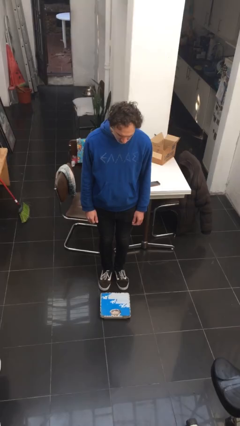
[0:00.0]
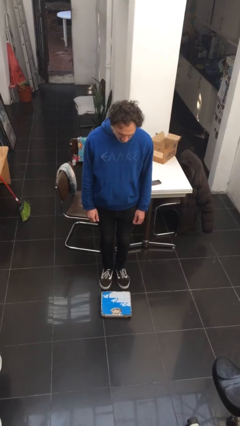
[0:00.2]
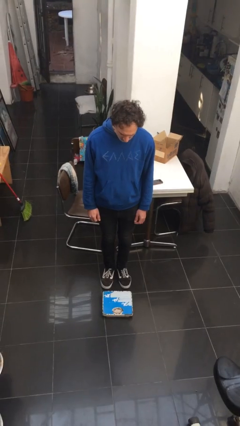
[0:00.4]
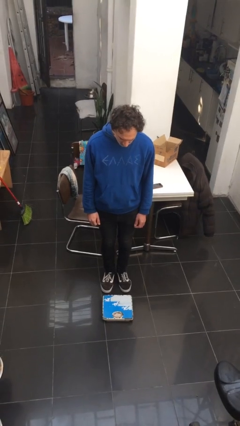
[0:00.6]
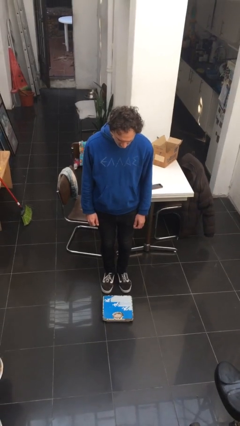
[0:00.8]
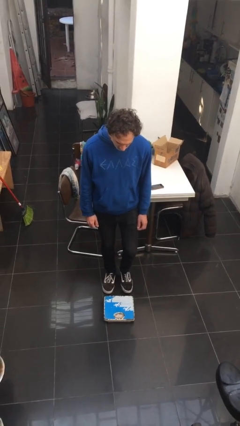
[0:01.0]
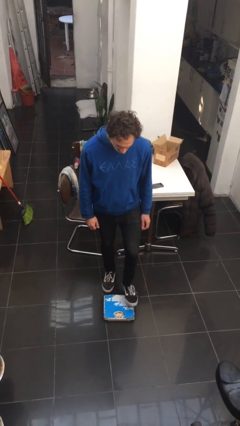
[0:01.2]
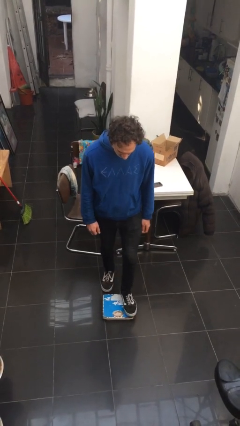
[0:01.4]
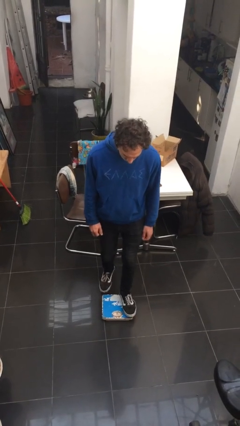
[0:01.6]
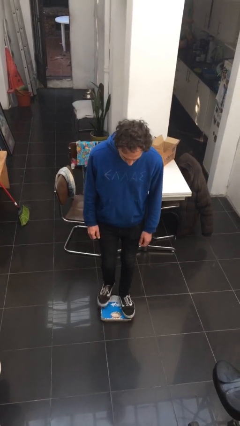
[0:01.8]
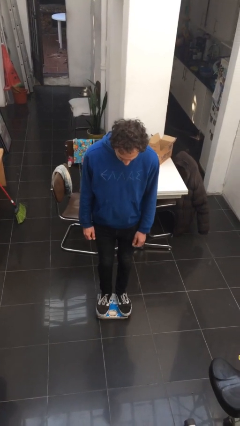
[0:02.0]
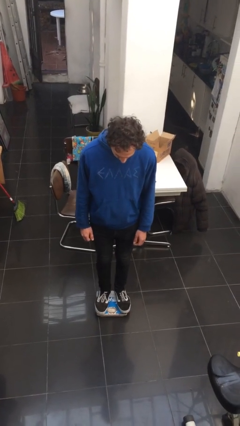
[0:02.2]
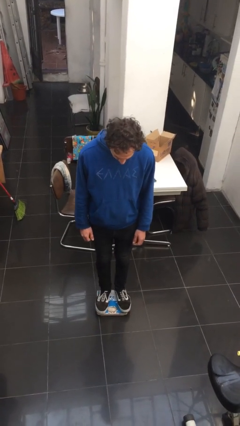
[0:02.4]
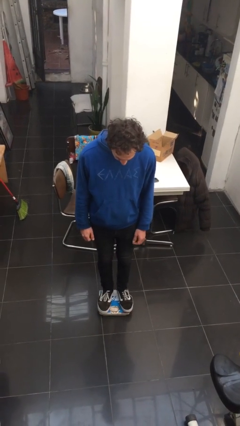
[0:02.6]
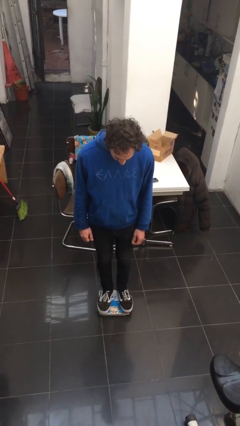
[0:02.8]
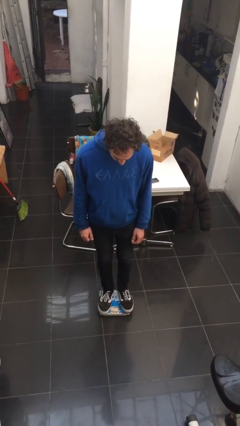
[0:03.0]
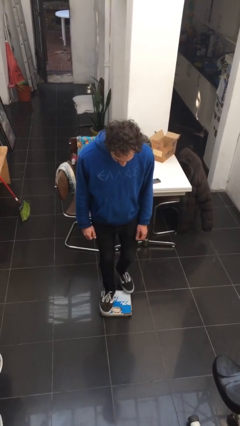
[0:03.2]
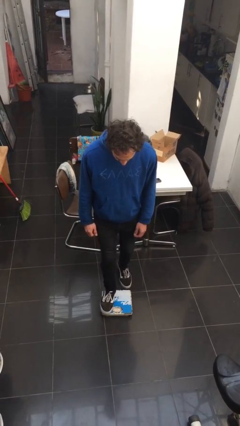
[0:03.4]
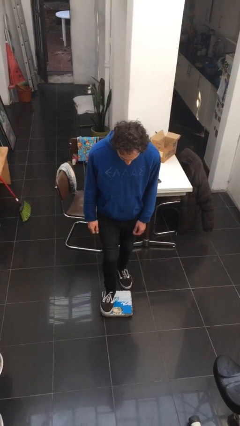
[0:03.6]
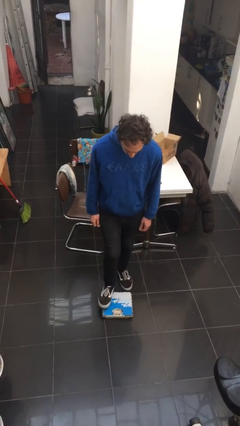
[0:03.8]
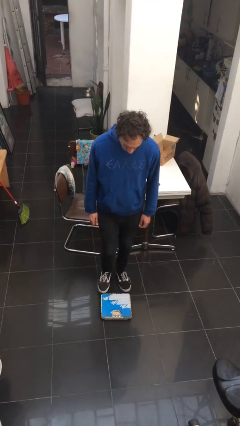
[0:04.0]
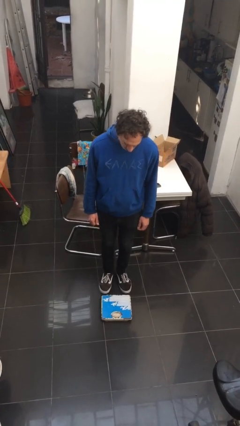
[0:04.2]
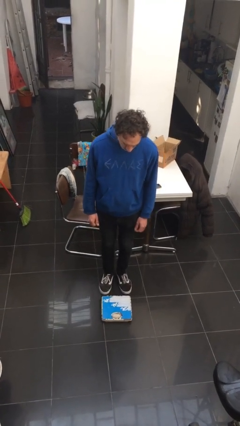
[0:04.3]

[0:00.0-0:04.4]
person uses bodyweight scale

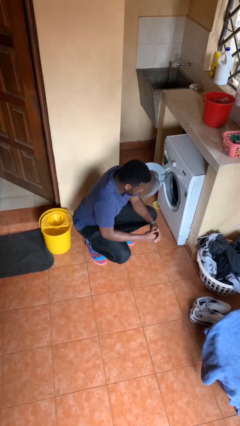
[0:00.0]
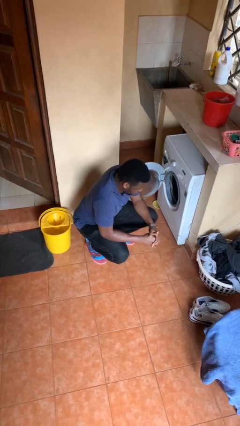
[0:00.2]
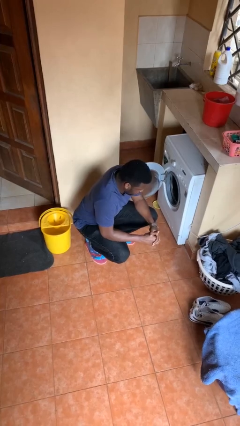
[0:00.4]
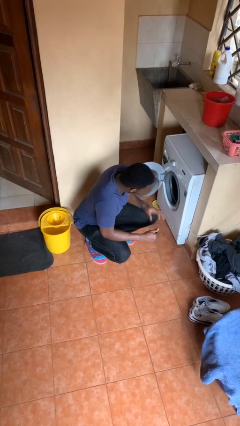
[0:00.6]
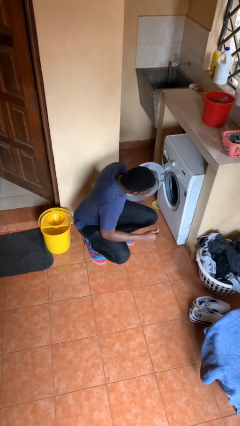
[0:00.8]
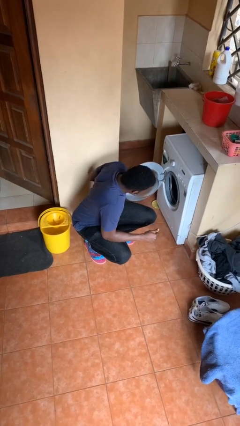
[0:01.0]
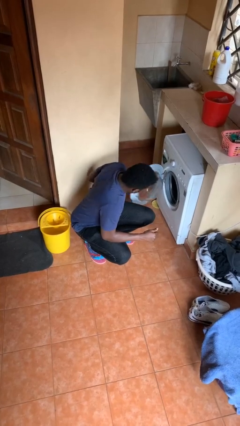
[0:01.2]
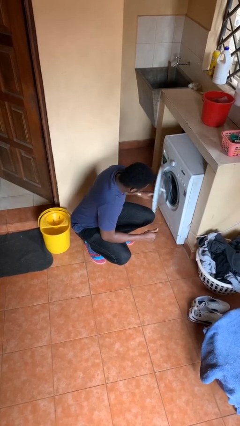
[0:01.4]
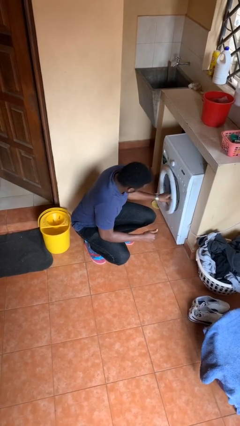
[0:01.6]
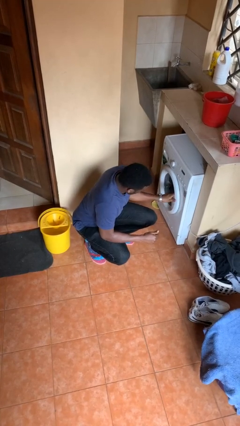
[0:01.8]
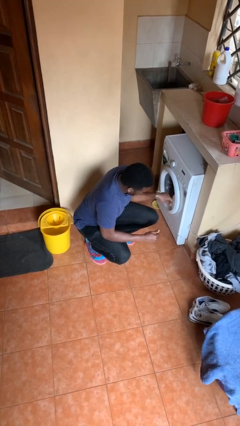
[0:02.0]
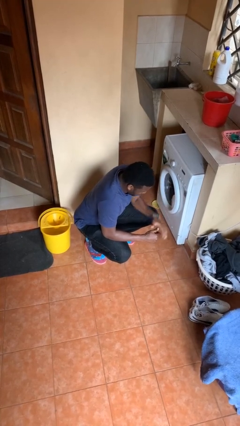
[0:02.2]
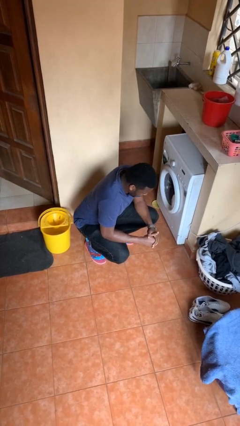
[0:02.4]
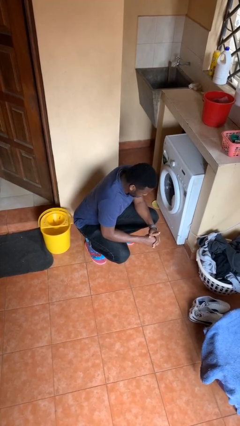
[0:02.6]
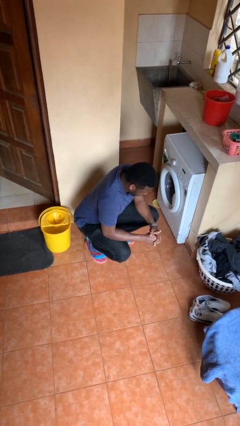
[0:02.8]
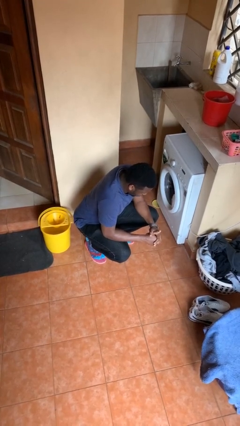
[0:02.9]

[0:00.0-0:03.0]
person closes clothes washer

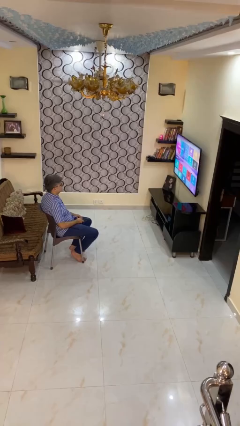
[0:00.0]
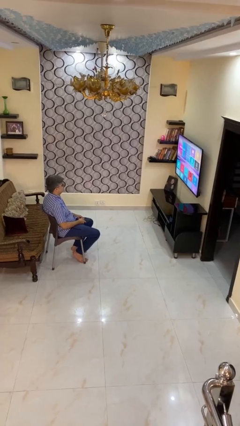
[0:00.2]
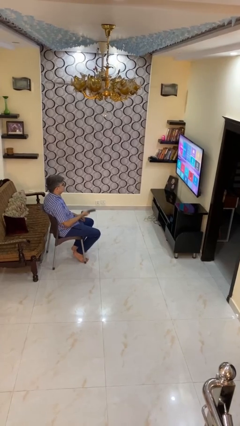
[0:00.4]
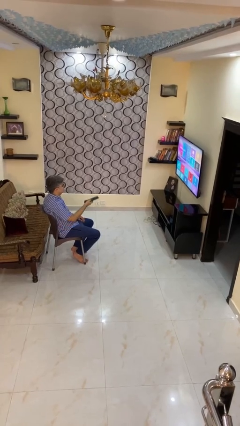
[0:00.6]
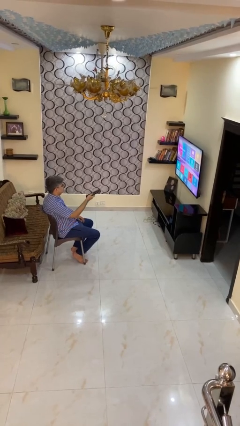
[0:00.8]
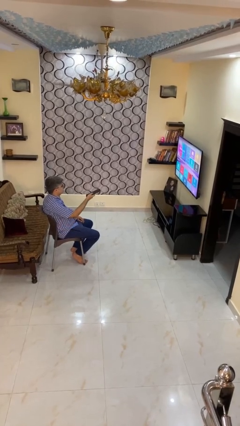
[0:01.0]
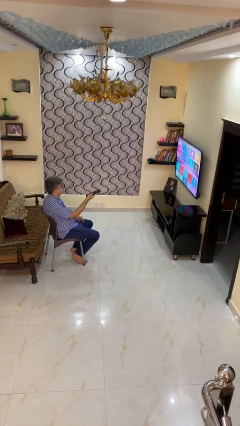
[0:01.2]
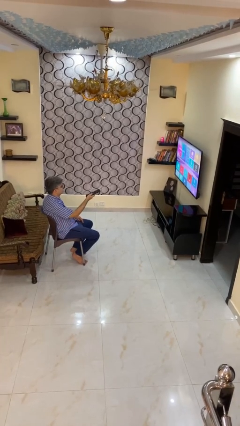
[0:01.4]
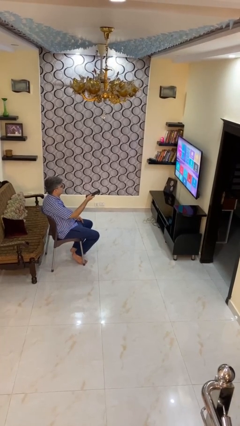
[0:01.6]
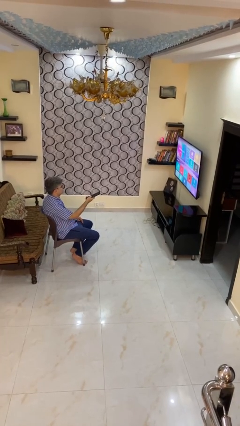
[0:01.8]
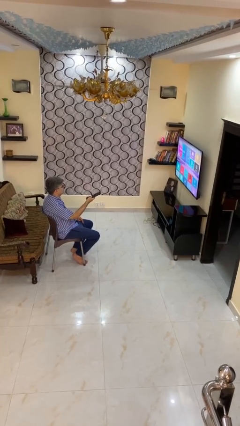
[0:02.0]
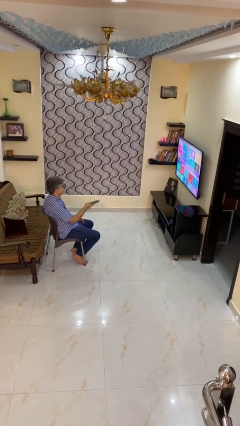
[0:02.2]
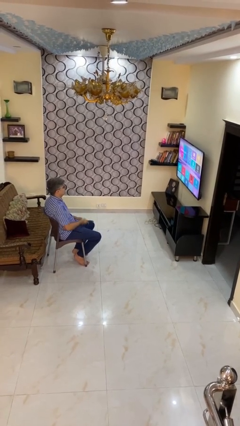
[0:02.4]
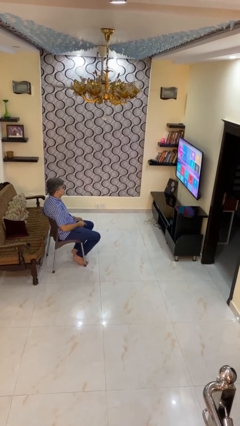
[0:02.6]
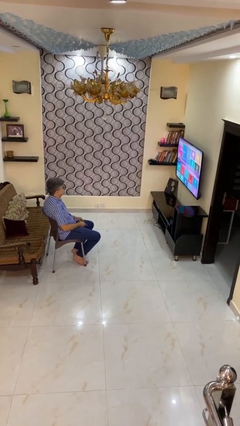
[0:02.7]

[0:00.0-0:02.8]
person uses television remote

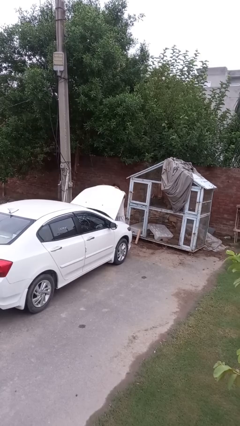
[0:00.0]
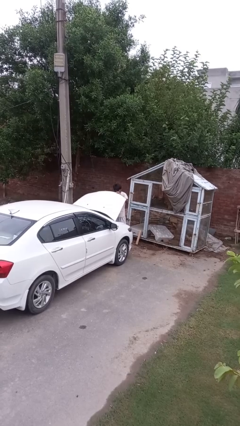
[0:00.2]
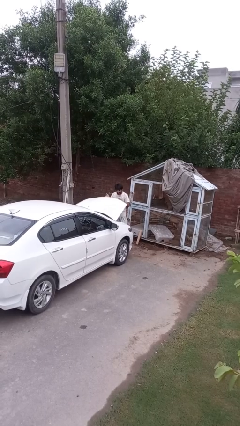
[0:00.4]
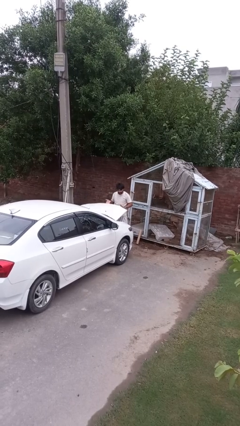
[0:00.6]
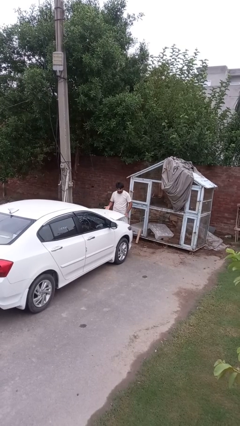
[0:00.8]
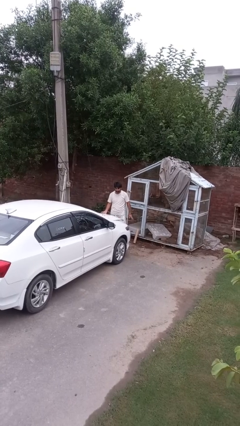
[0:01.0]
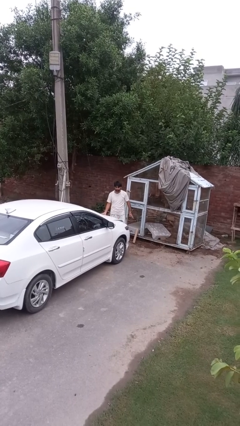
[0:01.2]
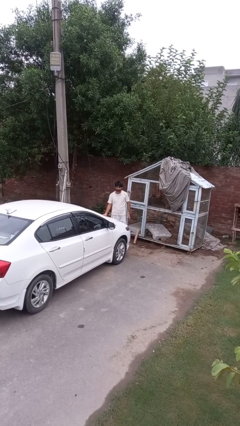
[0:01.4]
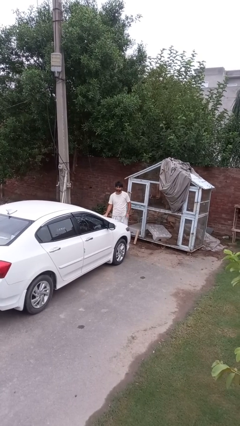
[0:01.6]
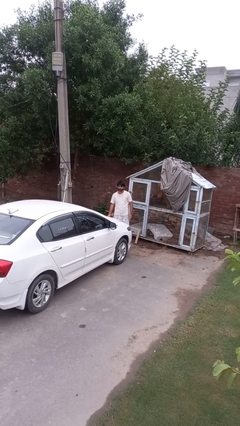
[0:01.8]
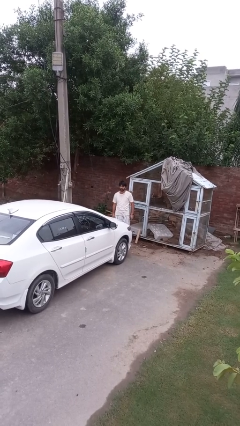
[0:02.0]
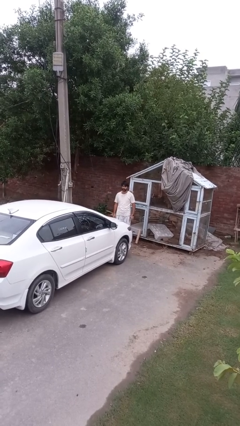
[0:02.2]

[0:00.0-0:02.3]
person closes car hood

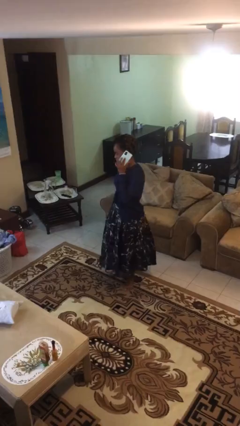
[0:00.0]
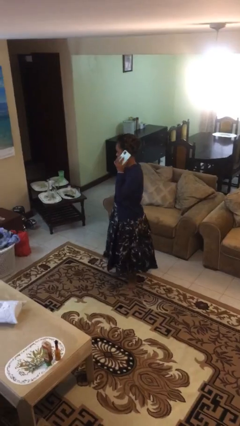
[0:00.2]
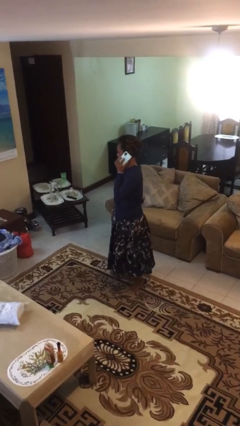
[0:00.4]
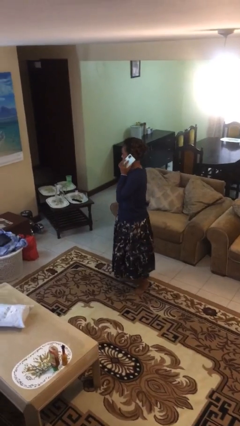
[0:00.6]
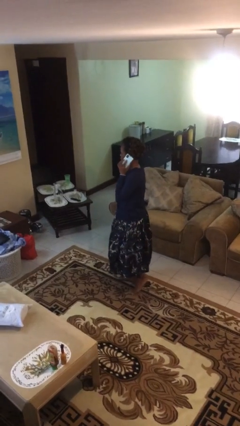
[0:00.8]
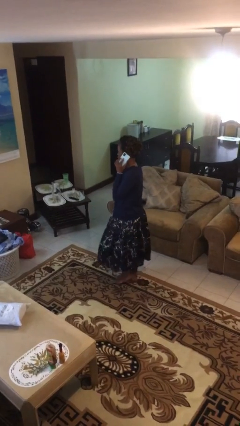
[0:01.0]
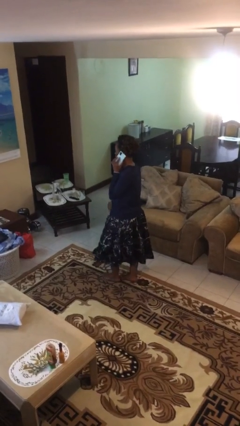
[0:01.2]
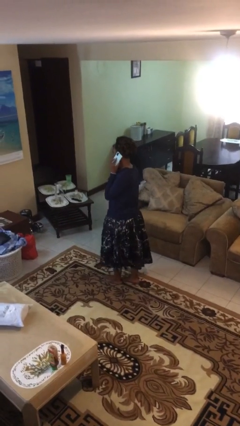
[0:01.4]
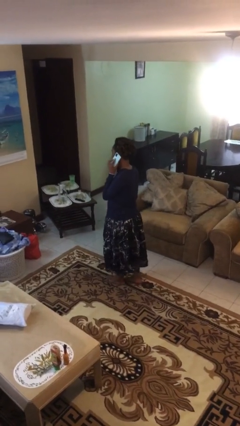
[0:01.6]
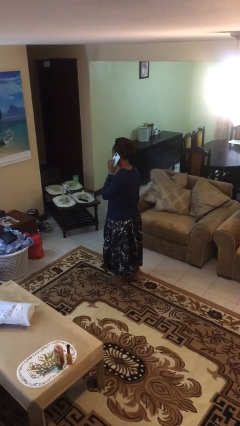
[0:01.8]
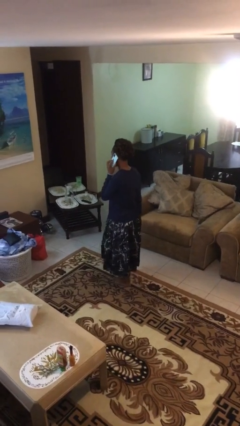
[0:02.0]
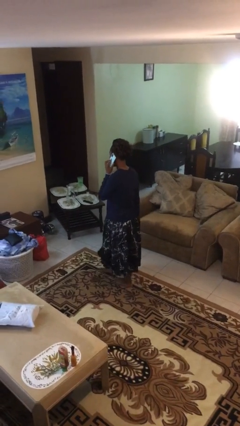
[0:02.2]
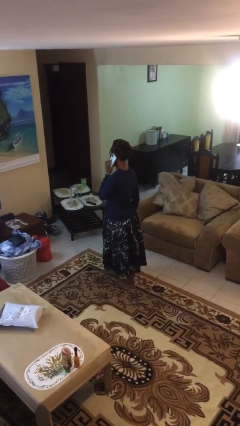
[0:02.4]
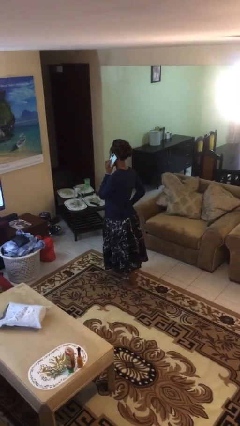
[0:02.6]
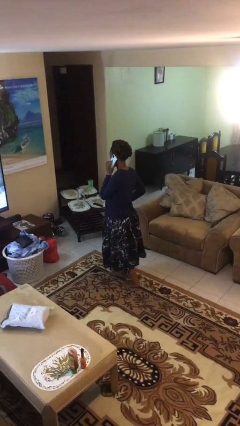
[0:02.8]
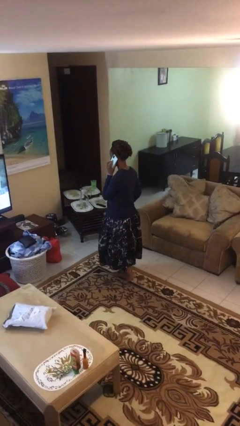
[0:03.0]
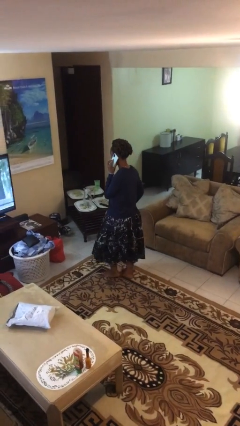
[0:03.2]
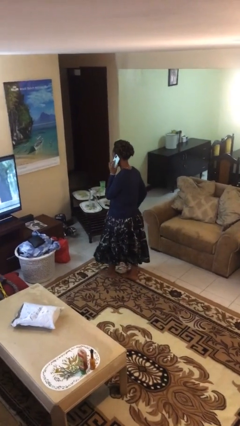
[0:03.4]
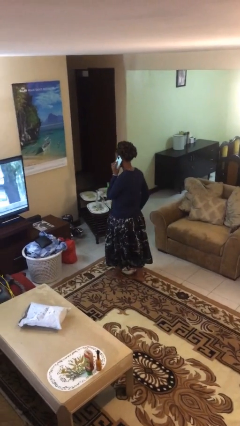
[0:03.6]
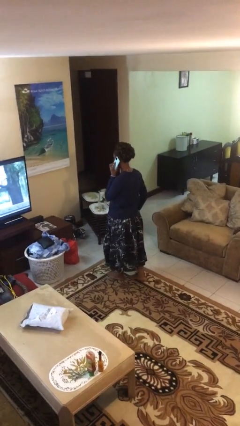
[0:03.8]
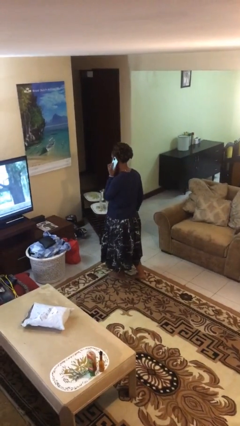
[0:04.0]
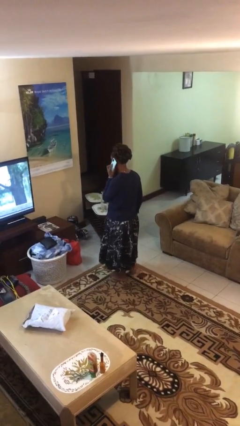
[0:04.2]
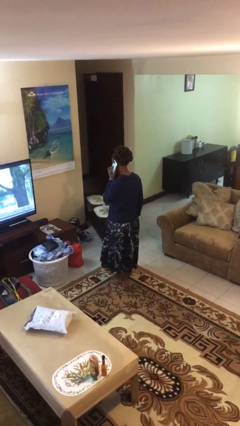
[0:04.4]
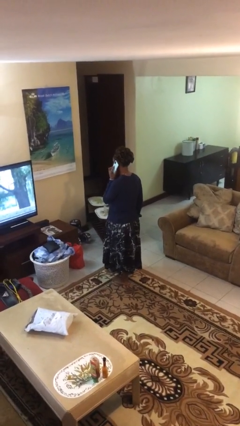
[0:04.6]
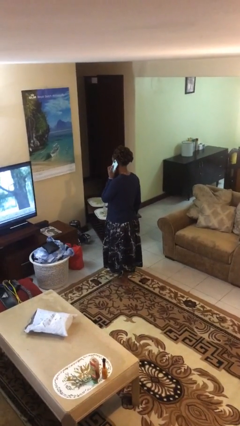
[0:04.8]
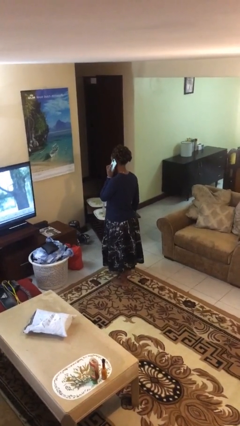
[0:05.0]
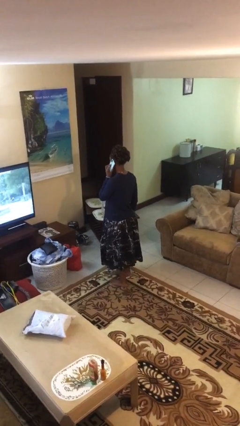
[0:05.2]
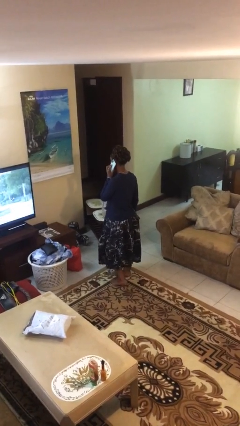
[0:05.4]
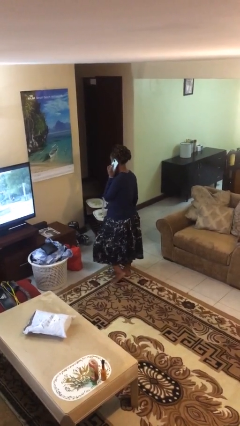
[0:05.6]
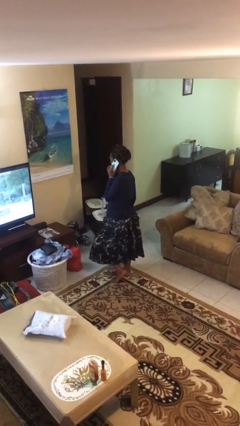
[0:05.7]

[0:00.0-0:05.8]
person talks on phone
